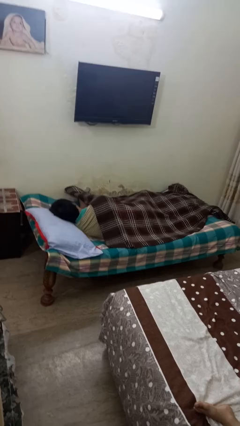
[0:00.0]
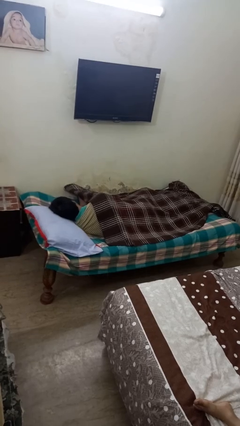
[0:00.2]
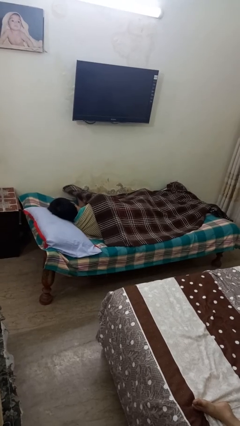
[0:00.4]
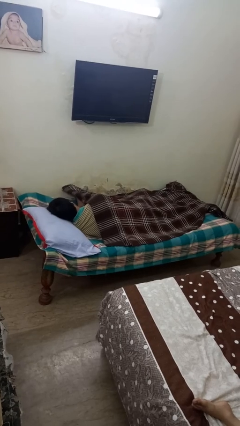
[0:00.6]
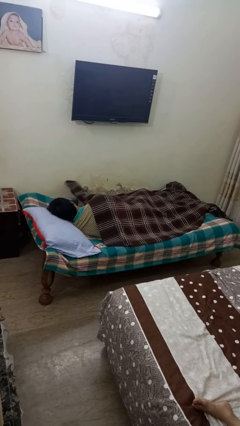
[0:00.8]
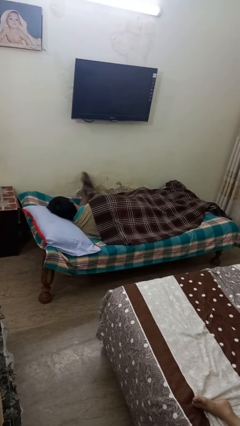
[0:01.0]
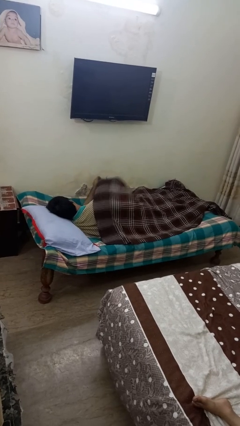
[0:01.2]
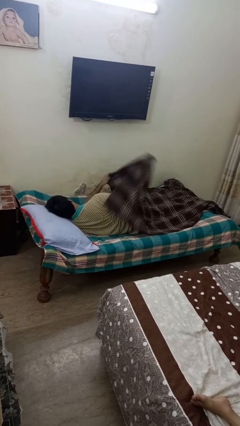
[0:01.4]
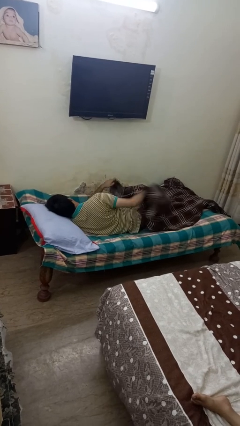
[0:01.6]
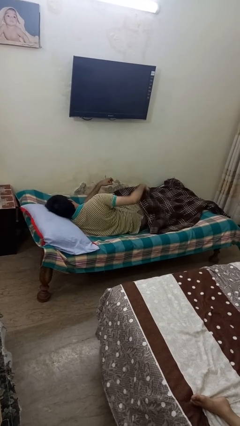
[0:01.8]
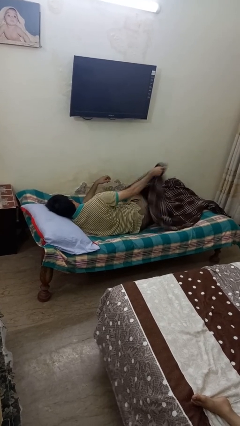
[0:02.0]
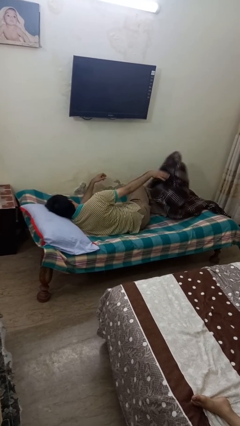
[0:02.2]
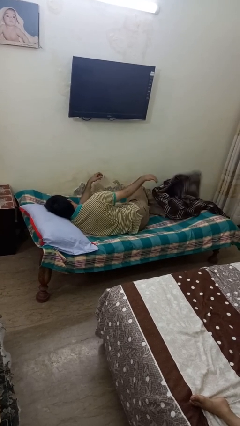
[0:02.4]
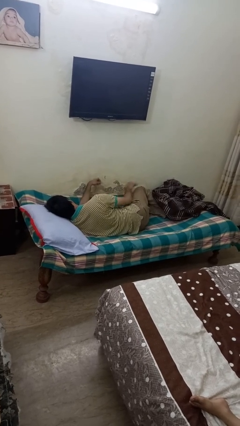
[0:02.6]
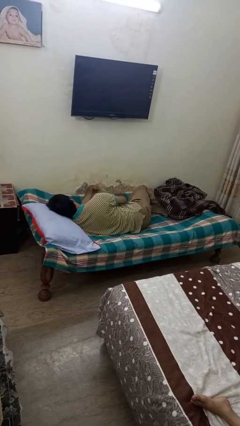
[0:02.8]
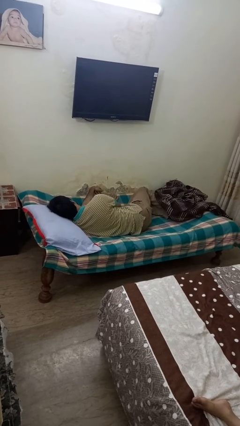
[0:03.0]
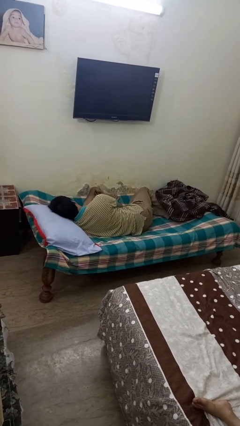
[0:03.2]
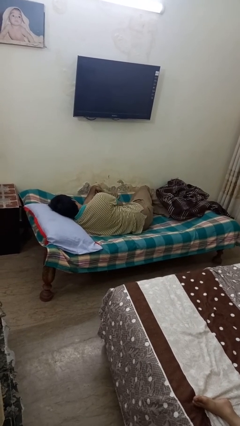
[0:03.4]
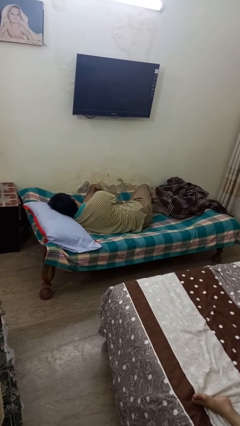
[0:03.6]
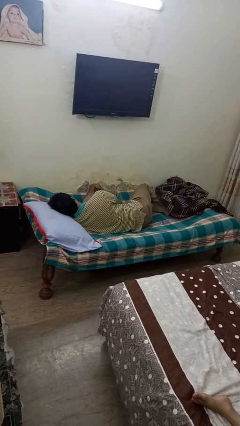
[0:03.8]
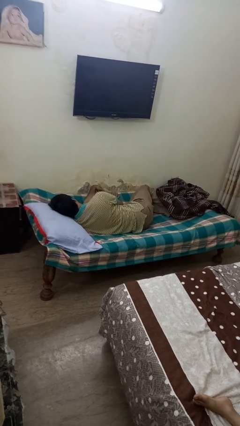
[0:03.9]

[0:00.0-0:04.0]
person uncovers with blanket

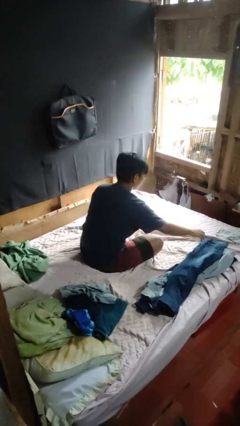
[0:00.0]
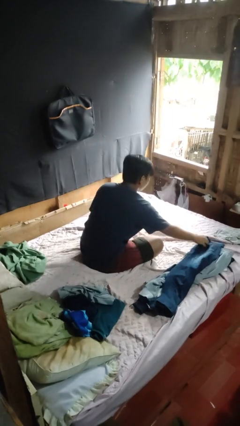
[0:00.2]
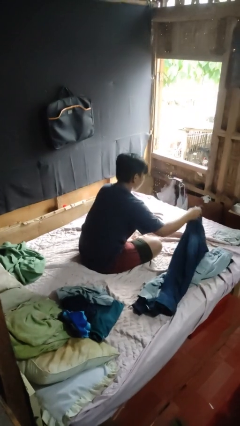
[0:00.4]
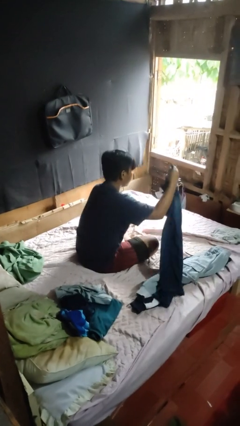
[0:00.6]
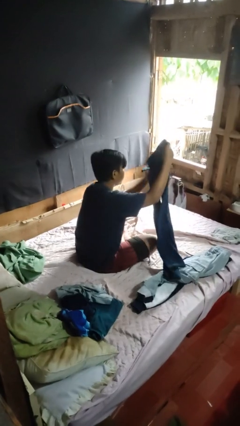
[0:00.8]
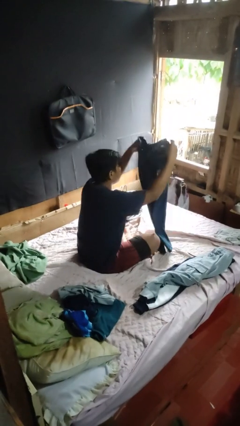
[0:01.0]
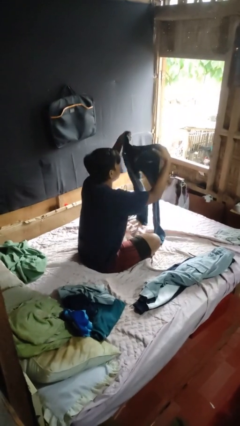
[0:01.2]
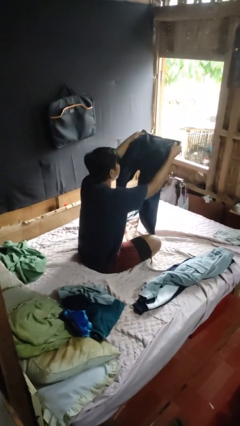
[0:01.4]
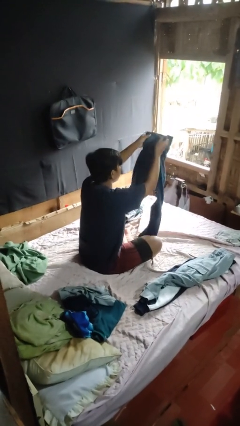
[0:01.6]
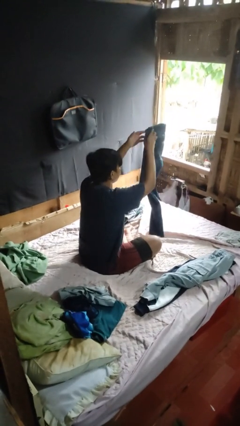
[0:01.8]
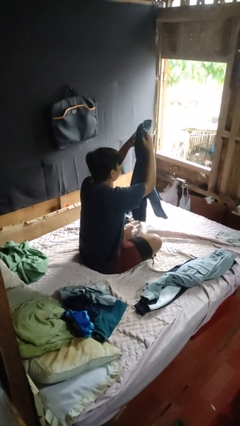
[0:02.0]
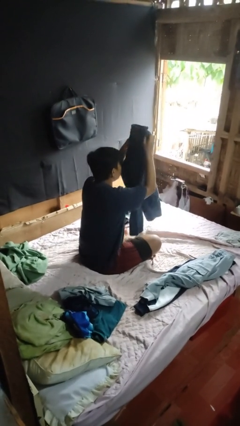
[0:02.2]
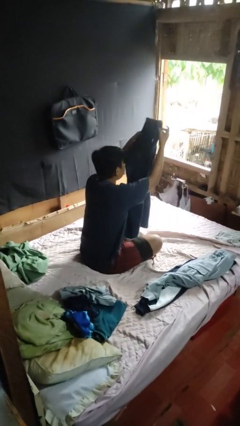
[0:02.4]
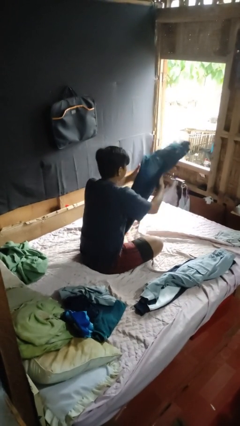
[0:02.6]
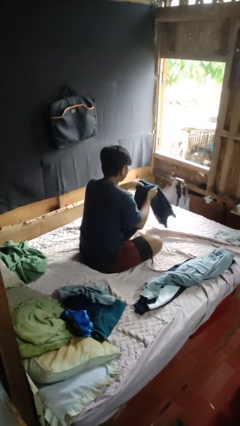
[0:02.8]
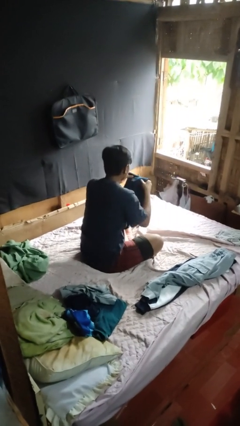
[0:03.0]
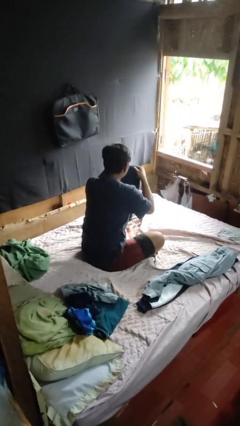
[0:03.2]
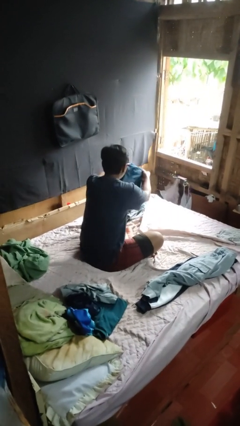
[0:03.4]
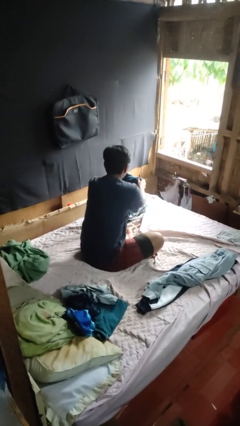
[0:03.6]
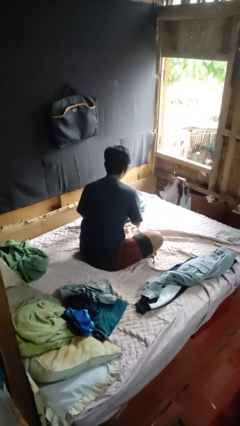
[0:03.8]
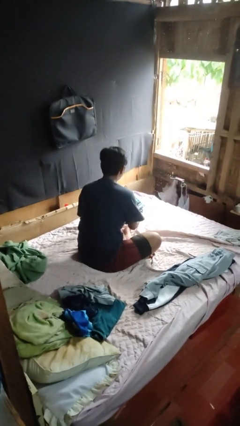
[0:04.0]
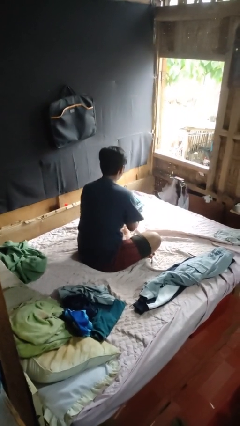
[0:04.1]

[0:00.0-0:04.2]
person folds pants

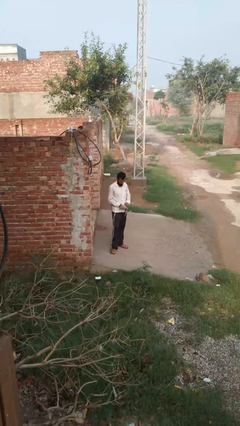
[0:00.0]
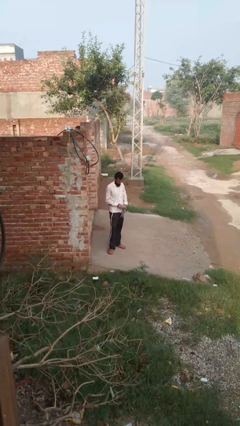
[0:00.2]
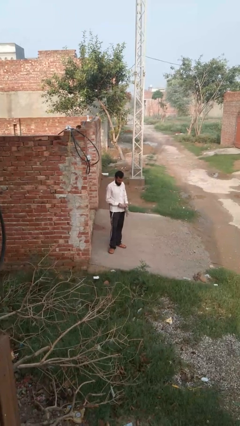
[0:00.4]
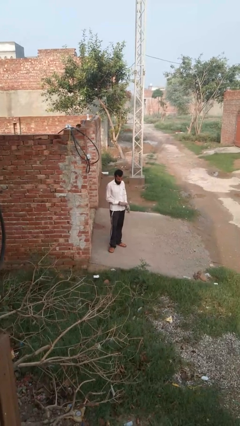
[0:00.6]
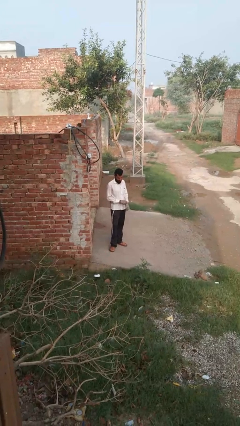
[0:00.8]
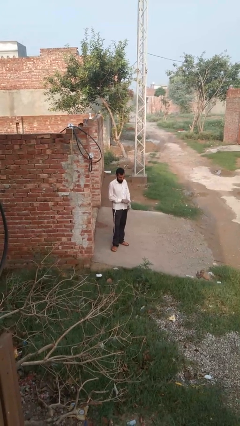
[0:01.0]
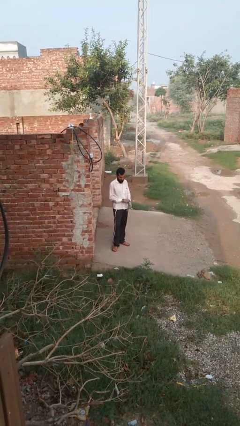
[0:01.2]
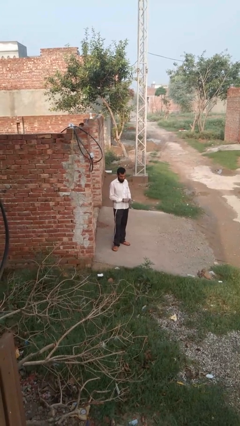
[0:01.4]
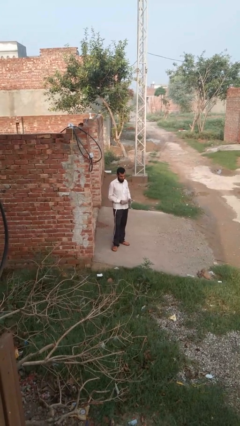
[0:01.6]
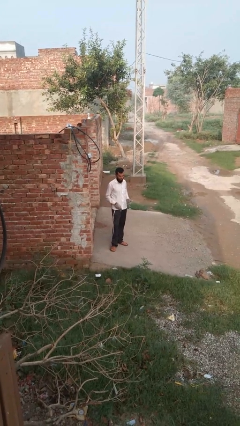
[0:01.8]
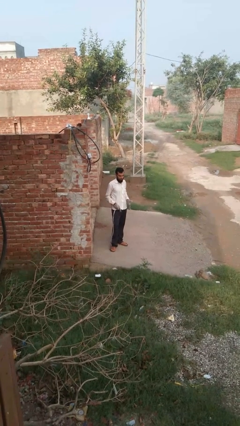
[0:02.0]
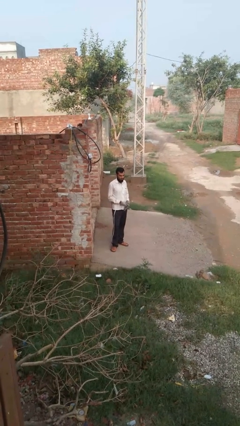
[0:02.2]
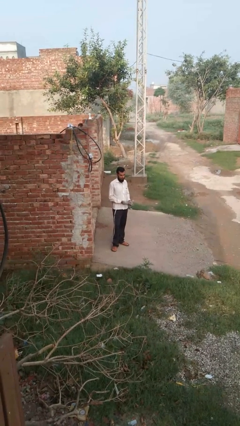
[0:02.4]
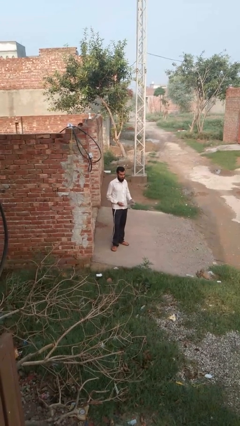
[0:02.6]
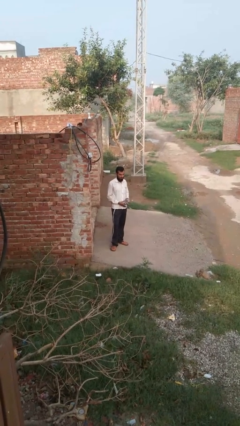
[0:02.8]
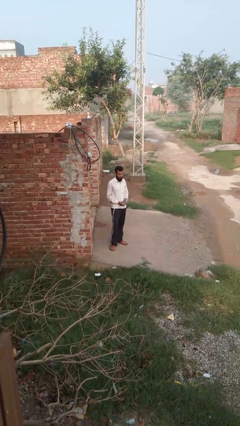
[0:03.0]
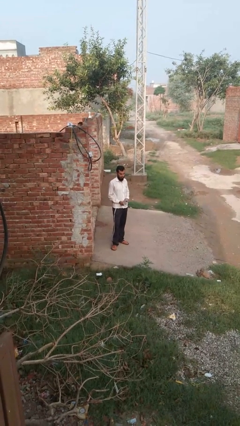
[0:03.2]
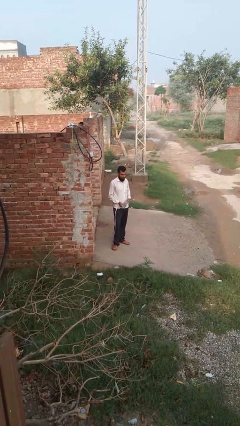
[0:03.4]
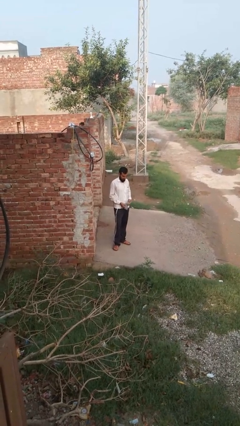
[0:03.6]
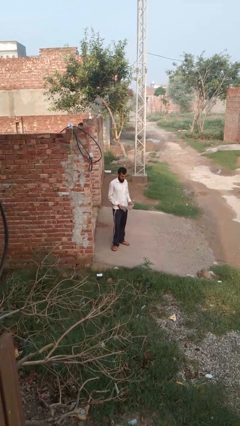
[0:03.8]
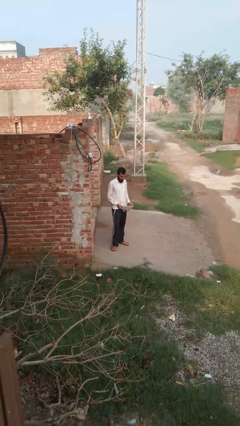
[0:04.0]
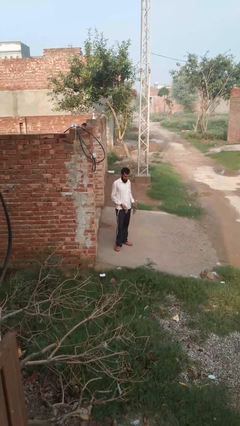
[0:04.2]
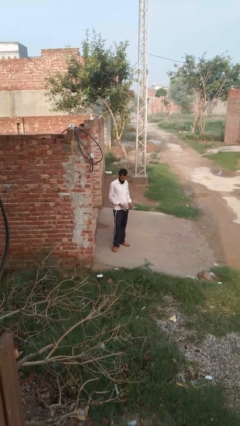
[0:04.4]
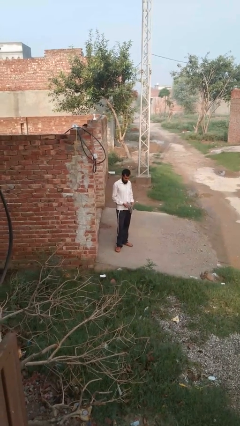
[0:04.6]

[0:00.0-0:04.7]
person takes off gloves

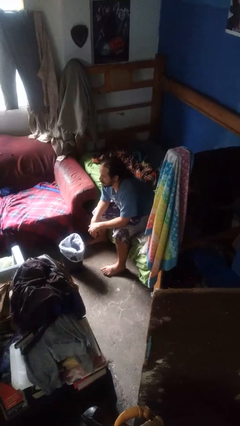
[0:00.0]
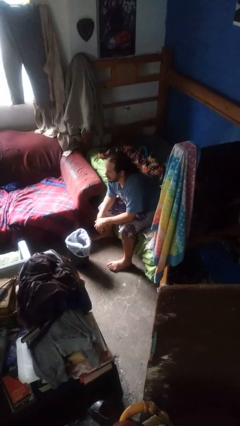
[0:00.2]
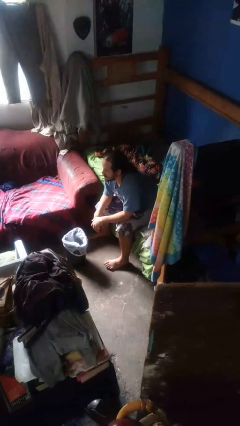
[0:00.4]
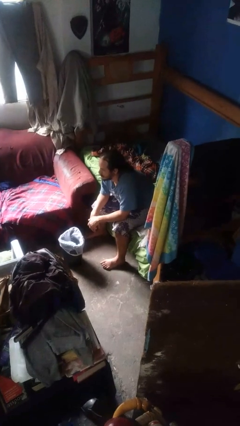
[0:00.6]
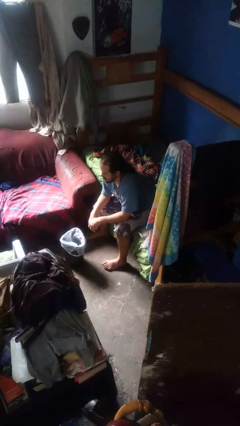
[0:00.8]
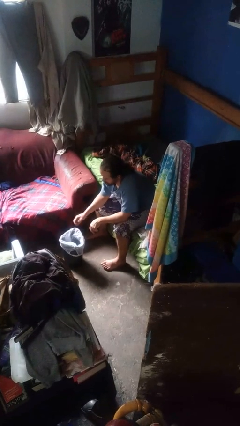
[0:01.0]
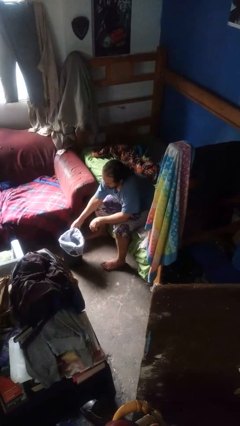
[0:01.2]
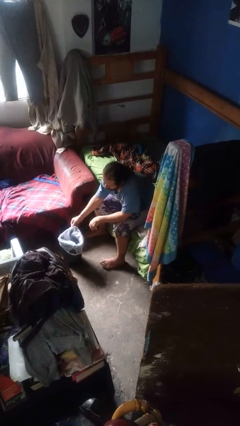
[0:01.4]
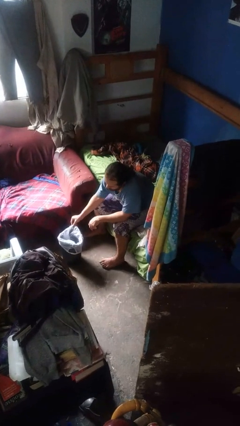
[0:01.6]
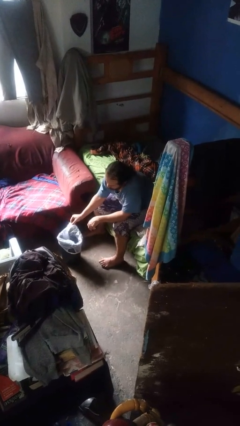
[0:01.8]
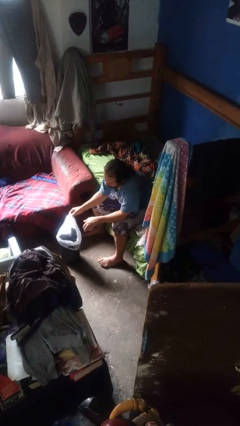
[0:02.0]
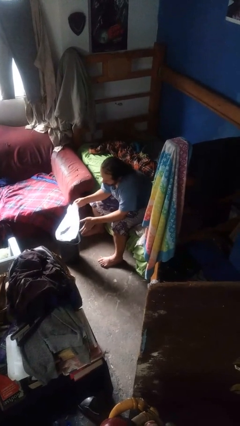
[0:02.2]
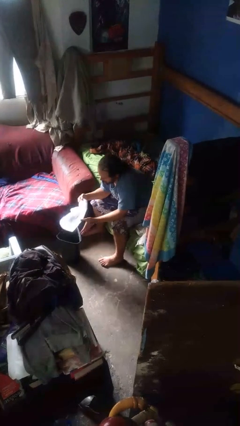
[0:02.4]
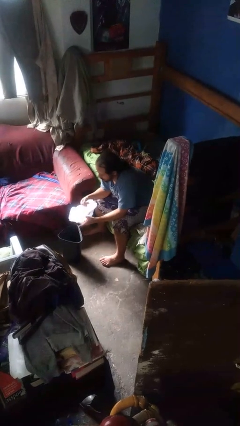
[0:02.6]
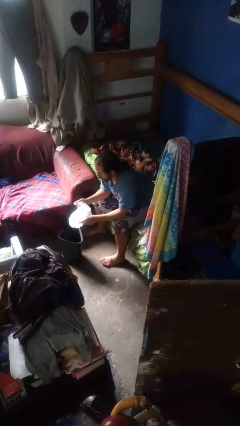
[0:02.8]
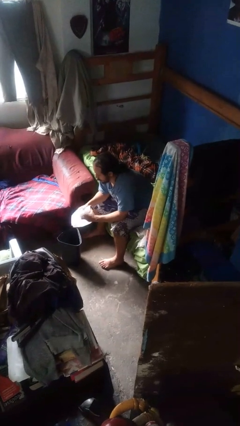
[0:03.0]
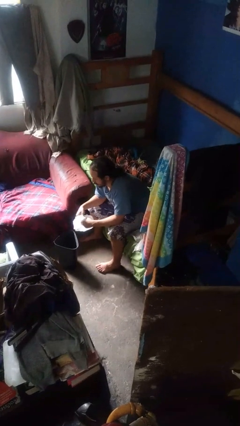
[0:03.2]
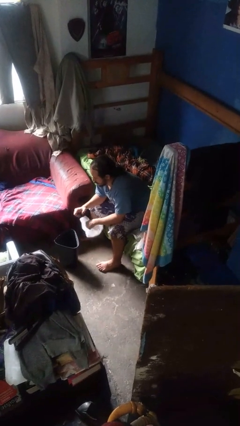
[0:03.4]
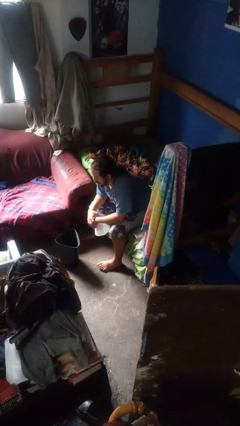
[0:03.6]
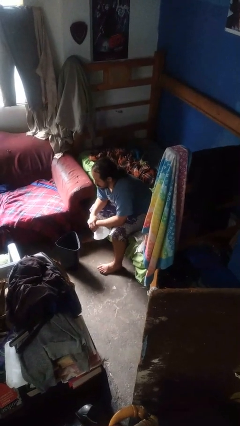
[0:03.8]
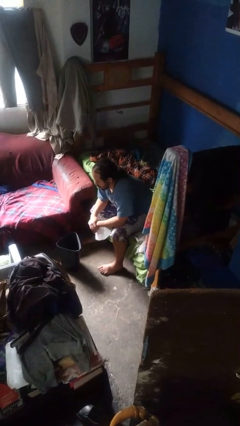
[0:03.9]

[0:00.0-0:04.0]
person removes trashbag from trashcan

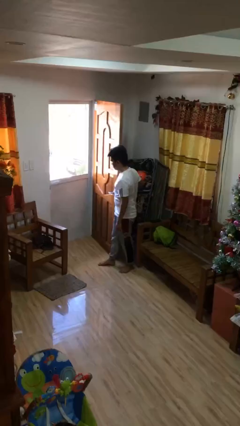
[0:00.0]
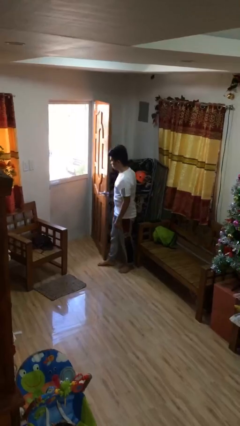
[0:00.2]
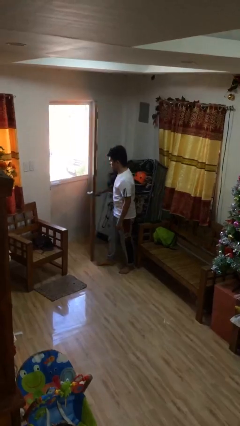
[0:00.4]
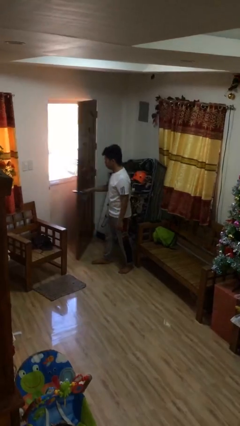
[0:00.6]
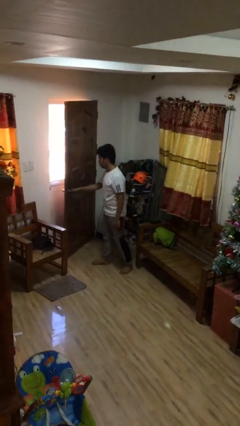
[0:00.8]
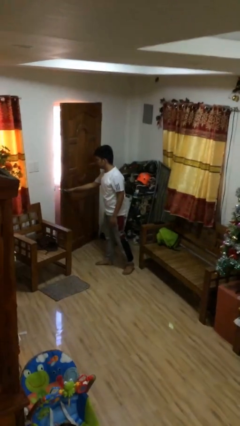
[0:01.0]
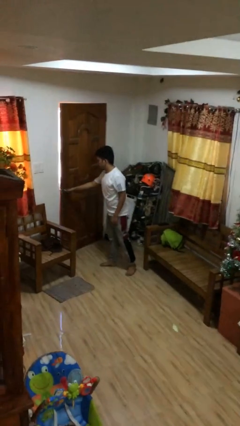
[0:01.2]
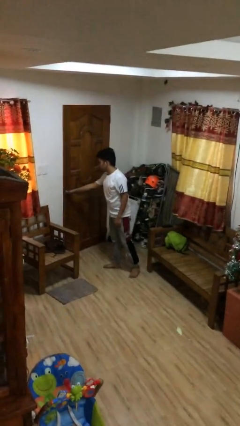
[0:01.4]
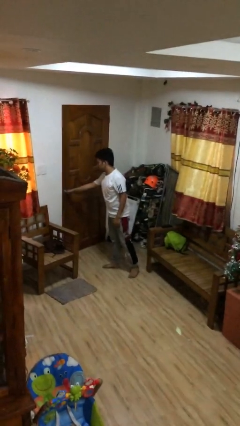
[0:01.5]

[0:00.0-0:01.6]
person closes facility door
